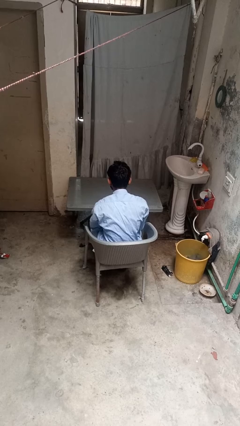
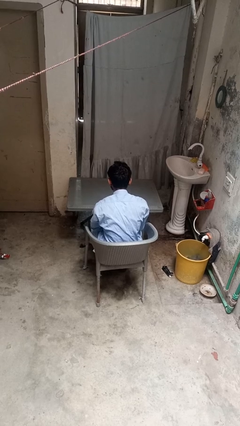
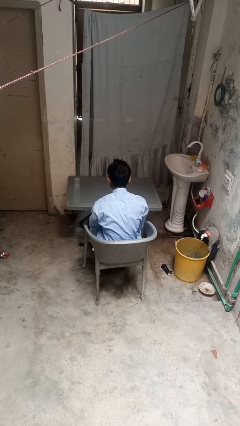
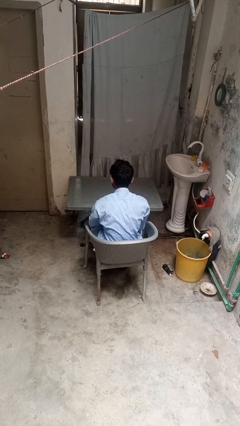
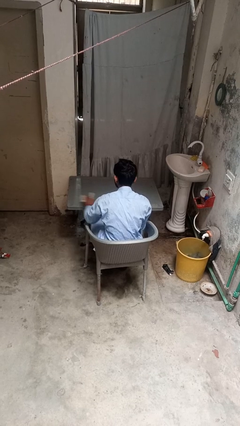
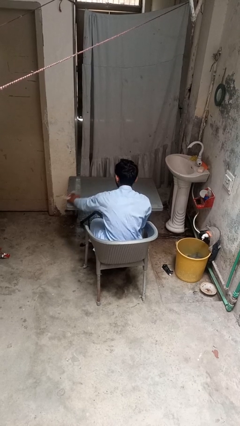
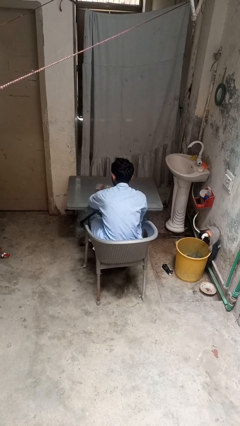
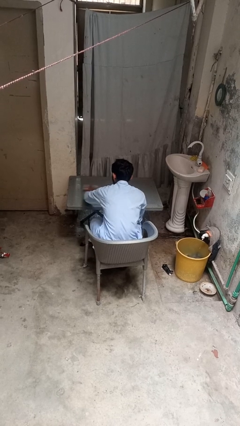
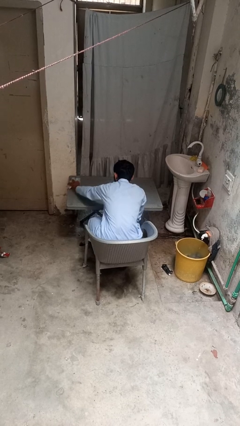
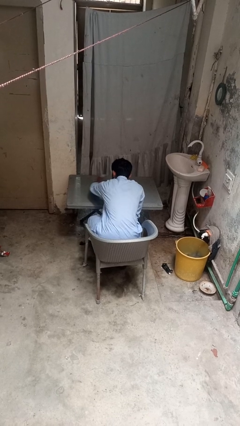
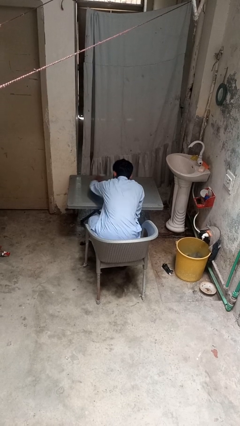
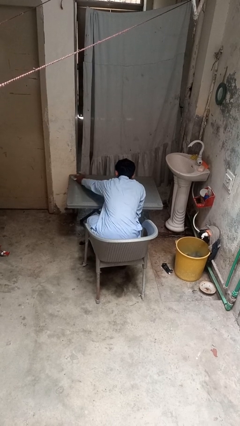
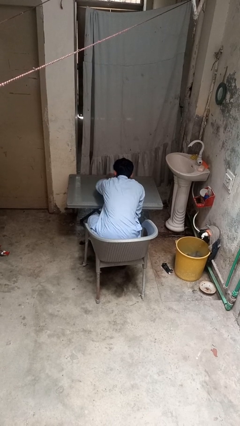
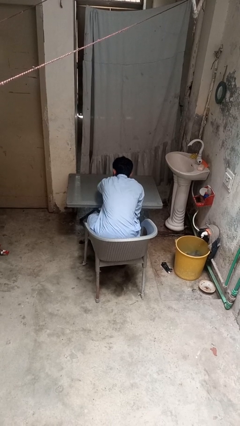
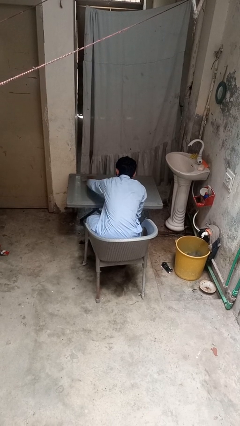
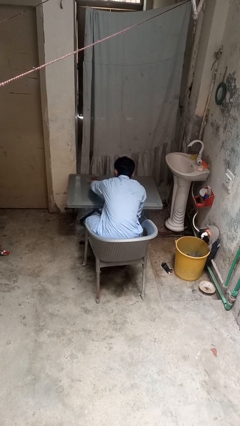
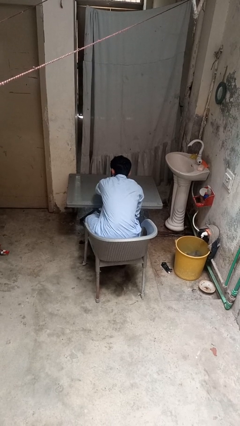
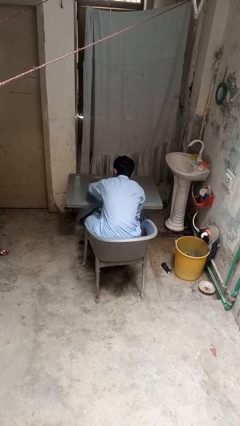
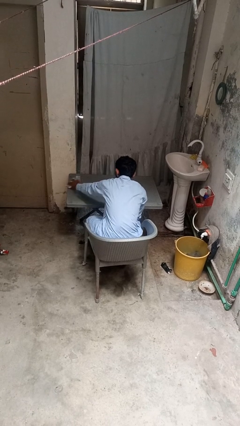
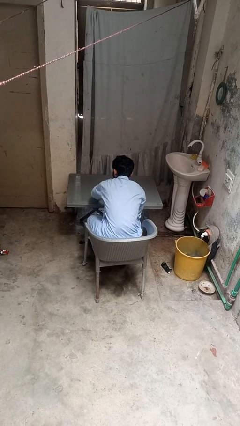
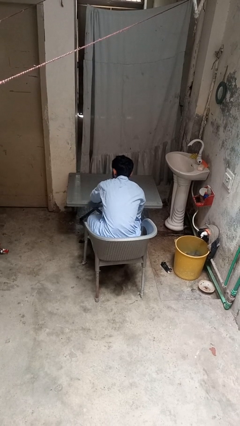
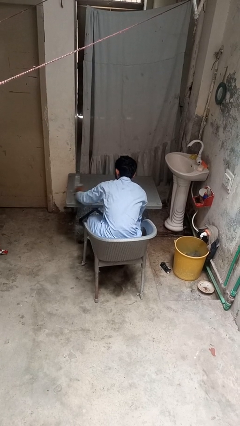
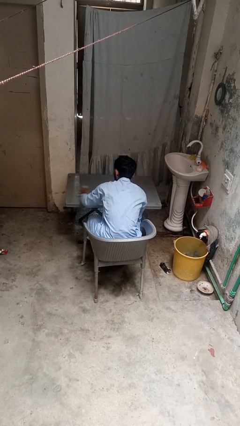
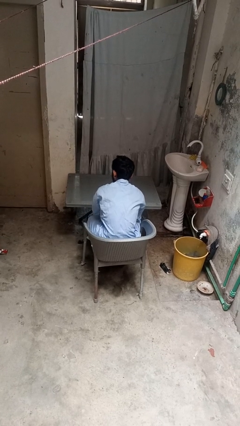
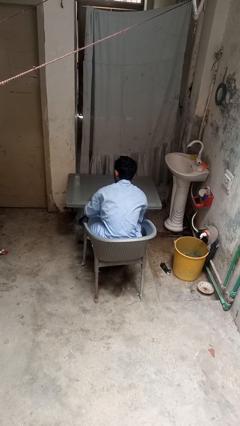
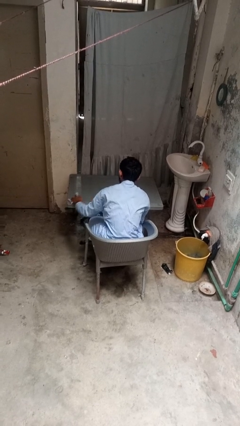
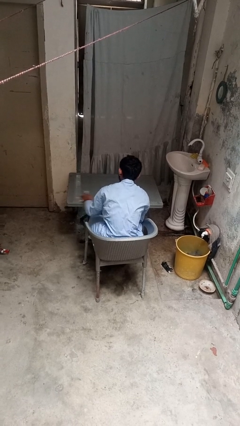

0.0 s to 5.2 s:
person cleans table with rag

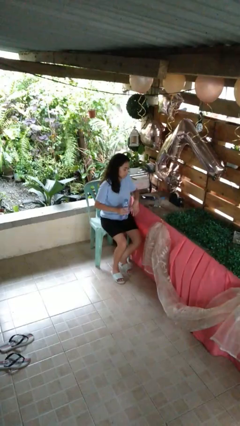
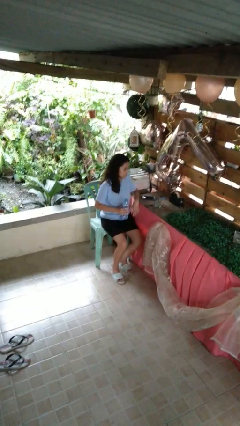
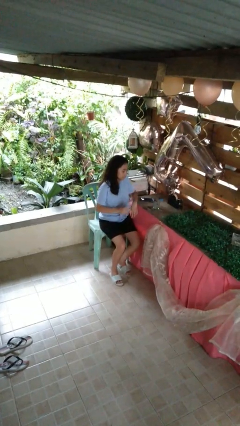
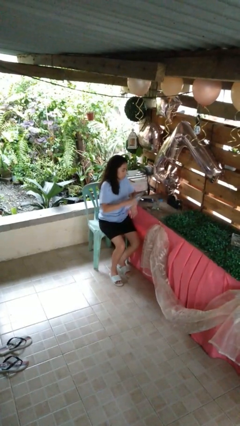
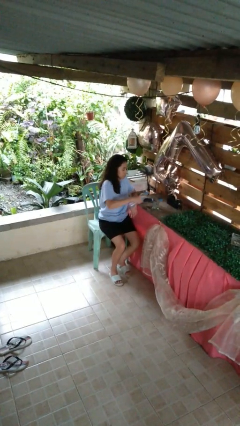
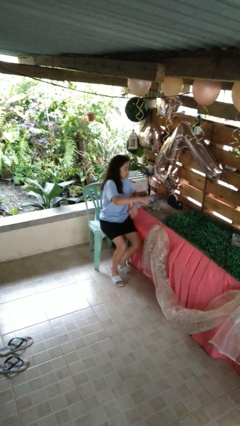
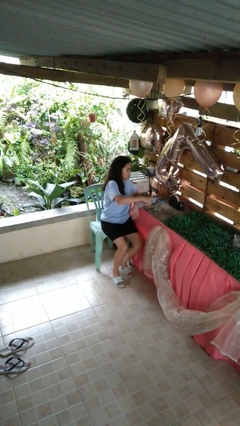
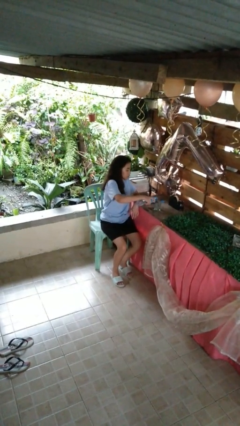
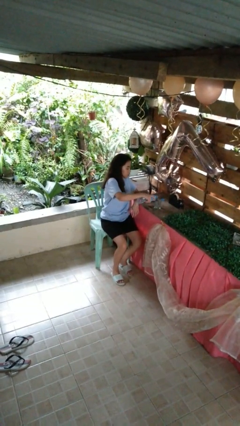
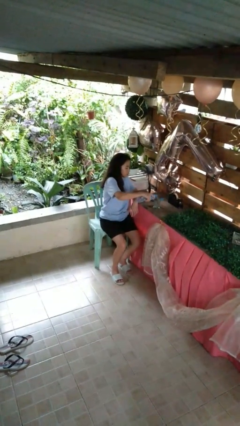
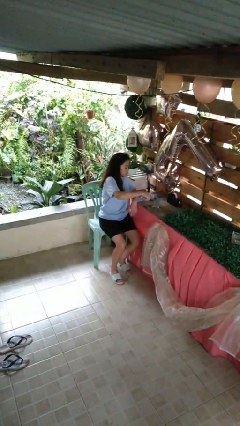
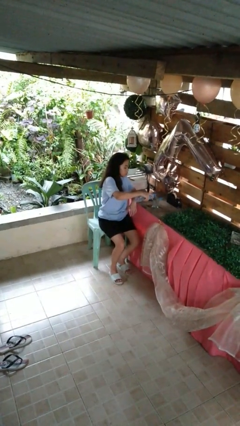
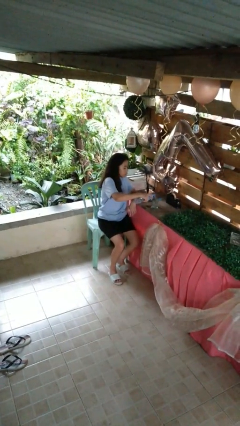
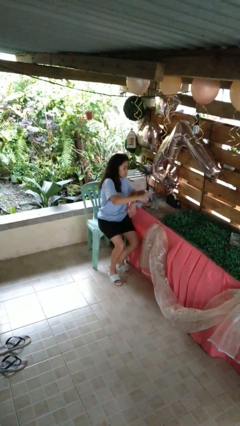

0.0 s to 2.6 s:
person pours liquid into cup

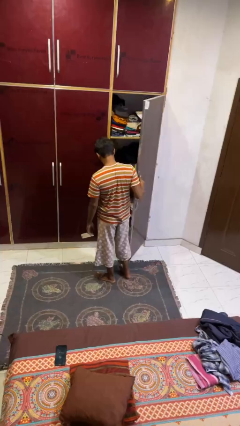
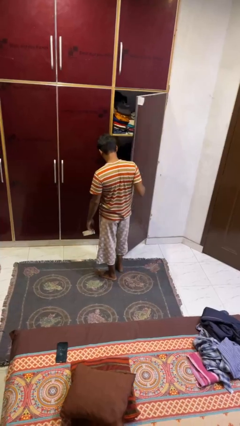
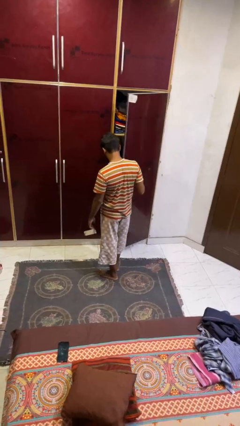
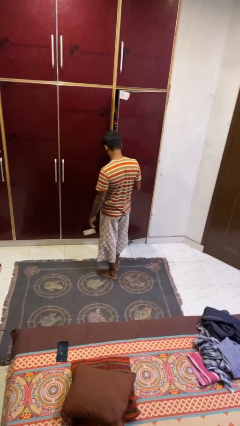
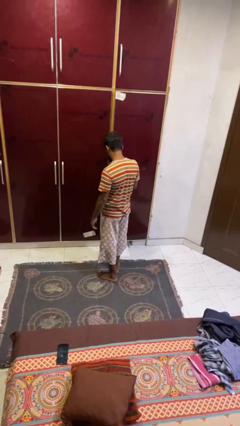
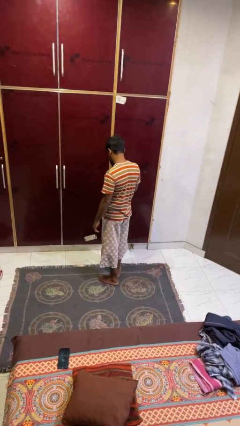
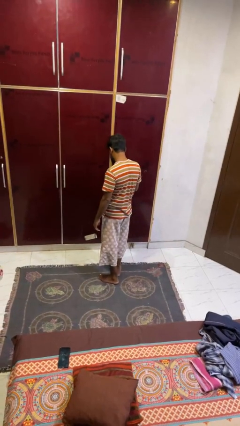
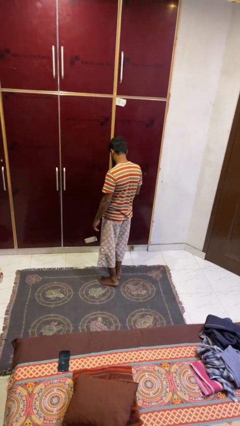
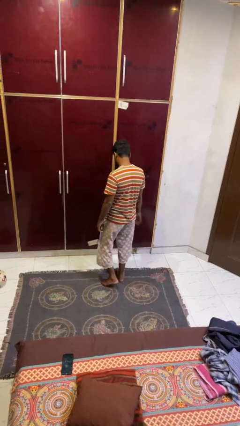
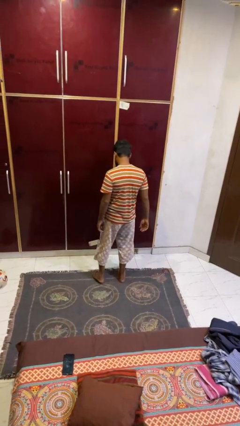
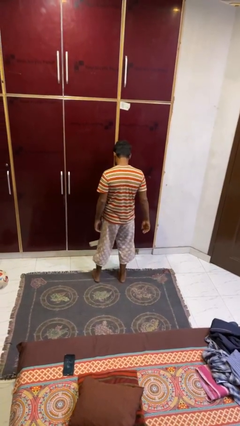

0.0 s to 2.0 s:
person closes closet door

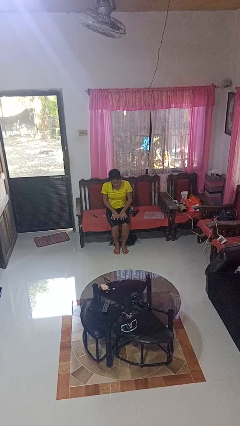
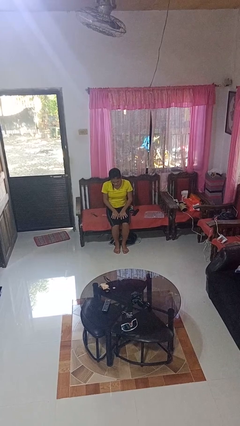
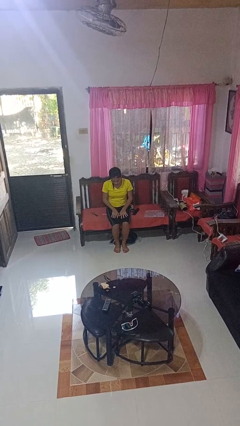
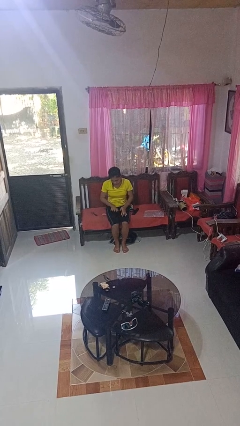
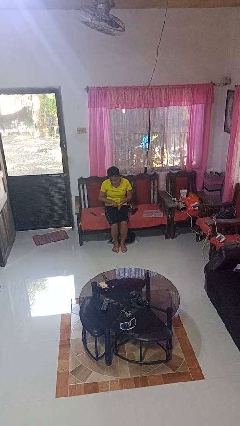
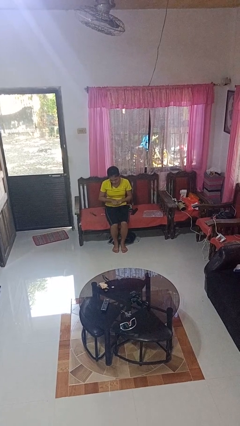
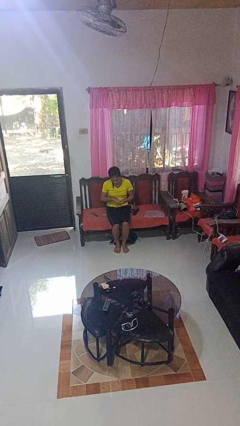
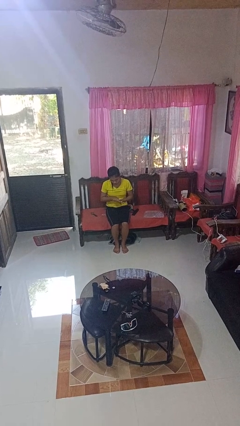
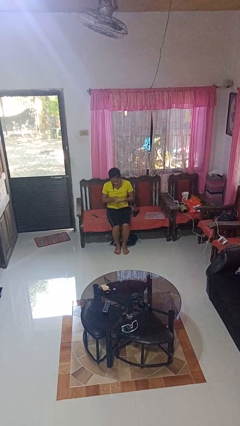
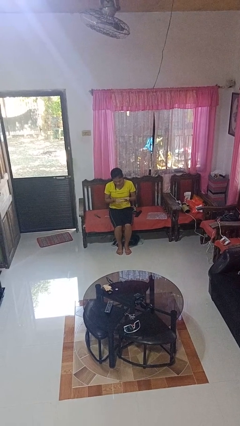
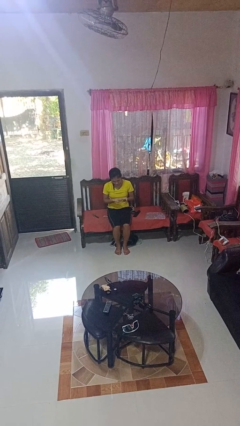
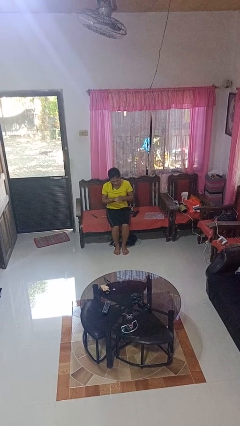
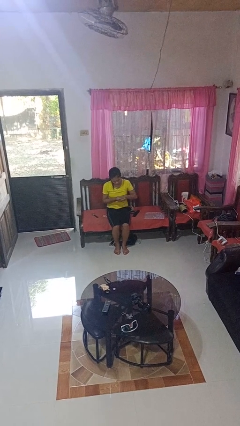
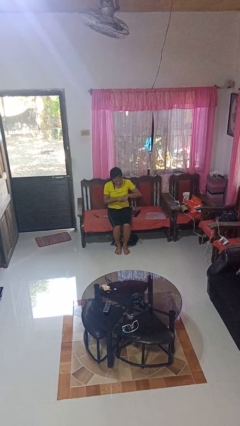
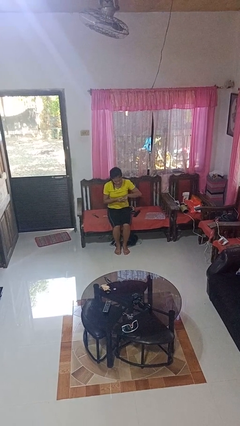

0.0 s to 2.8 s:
person looks at hands in lap

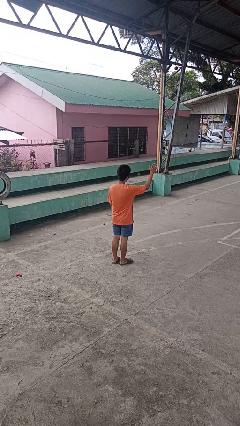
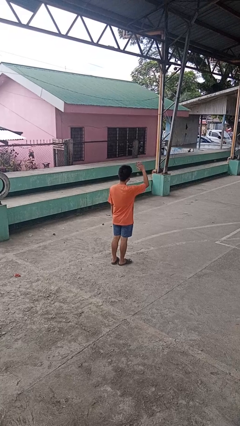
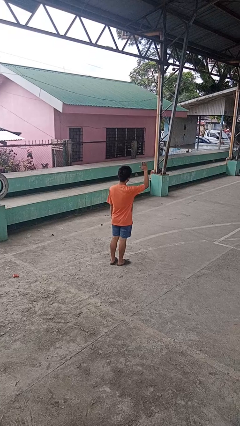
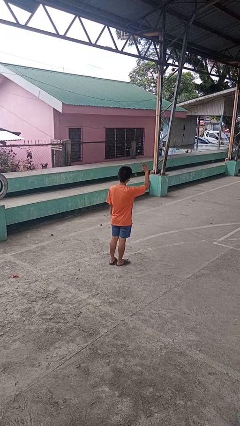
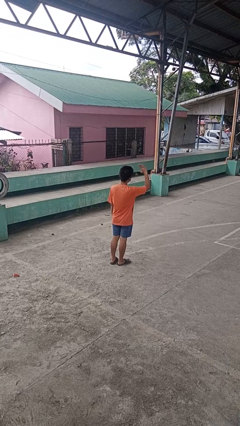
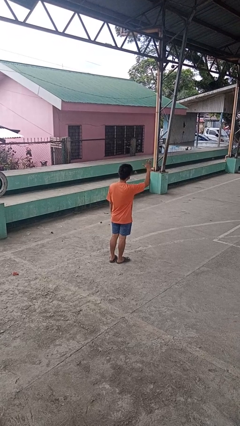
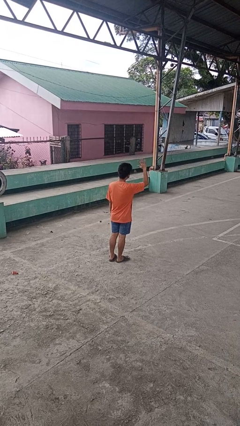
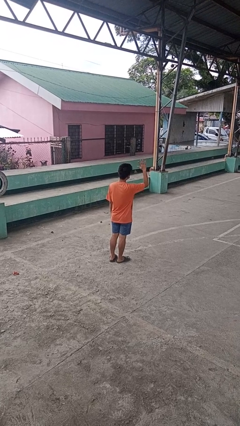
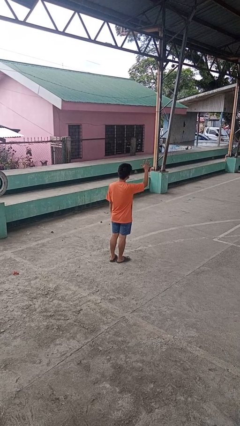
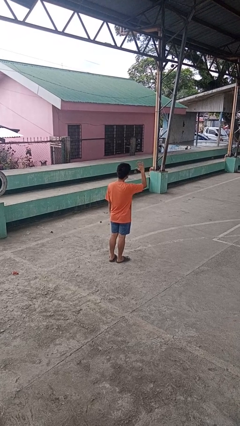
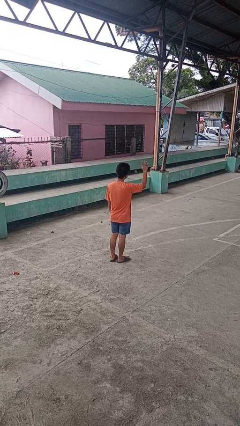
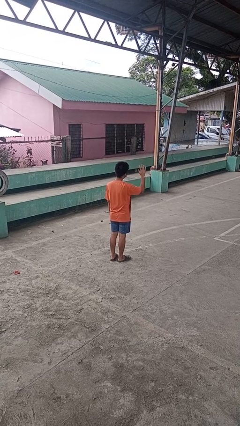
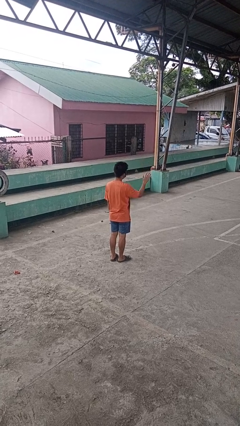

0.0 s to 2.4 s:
person waves at person

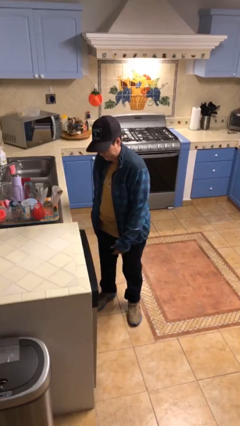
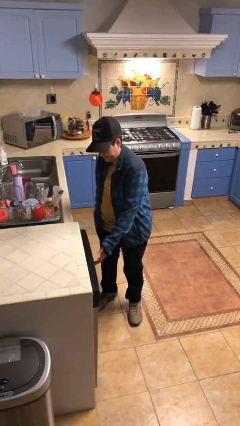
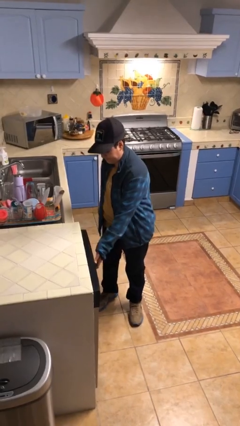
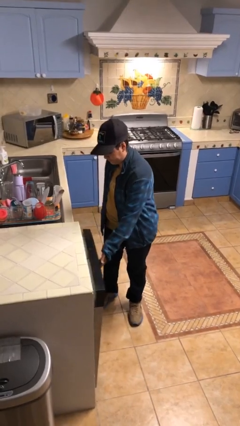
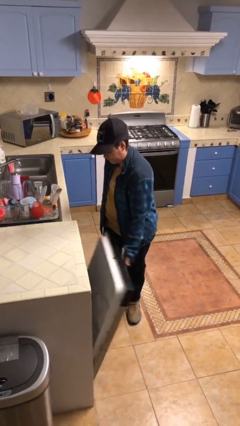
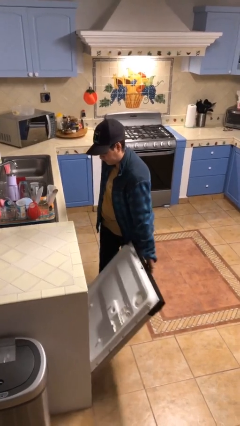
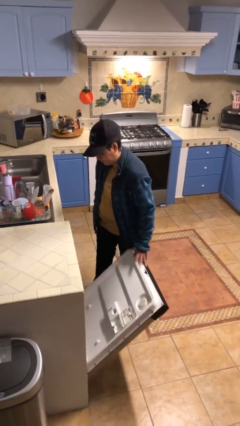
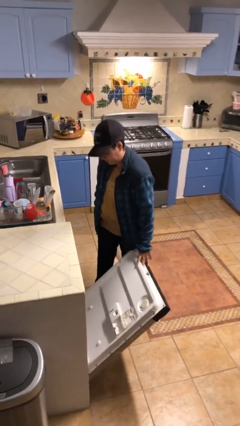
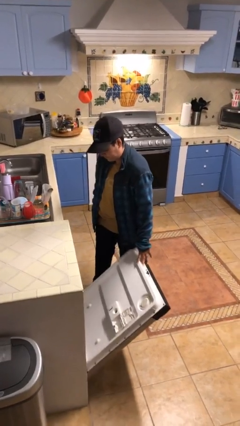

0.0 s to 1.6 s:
person opens dishwasher

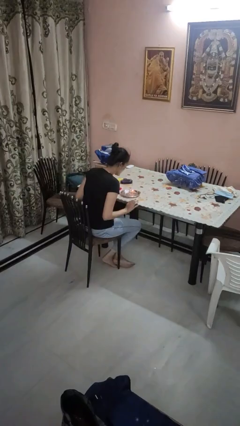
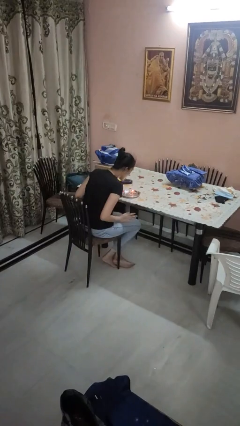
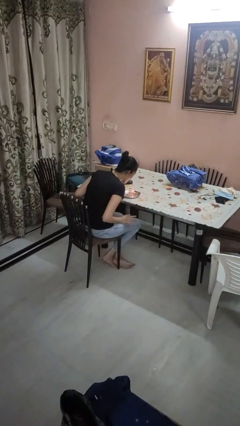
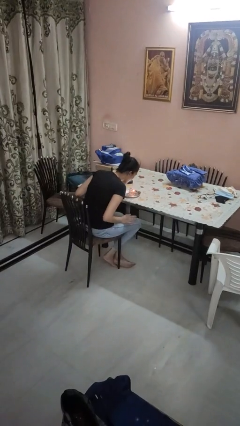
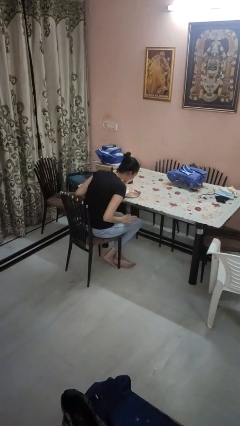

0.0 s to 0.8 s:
person extinguishes candle
